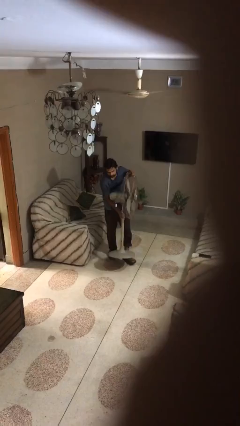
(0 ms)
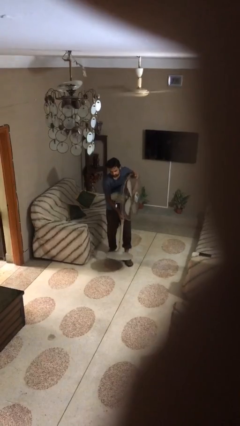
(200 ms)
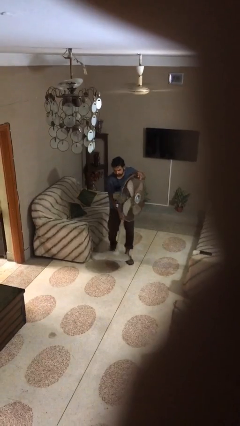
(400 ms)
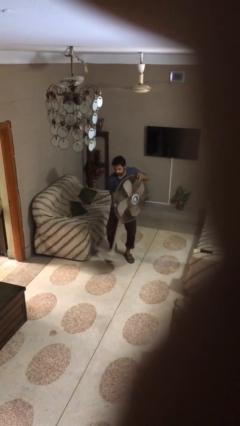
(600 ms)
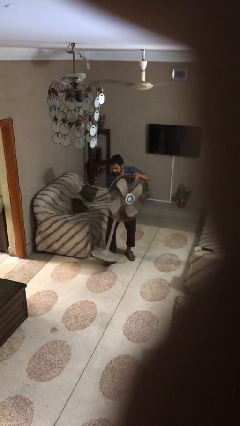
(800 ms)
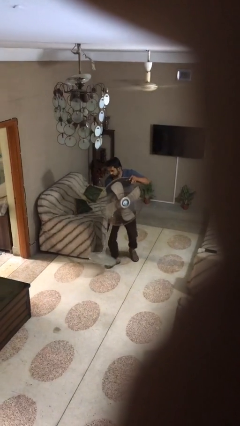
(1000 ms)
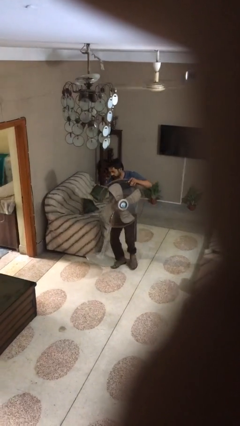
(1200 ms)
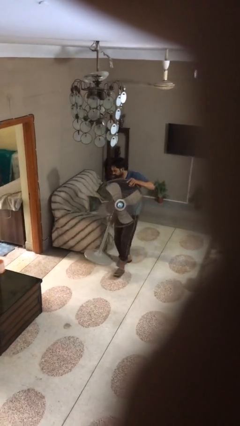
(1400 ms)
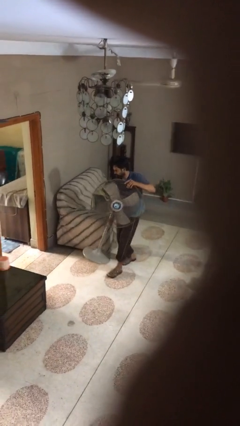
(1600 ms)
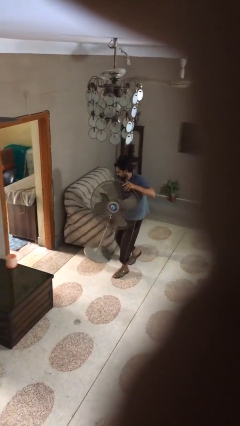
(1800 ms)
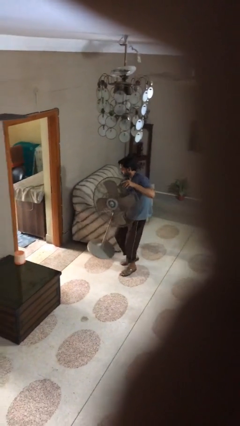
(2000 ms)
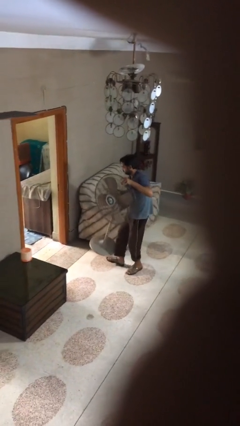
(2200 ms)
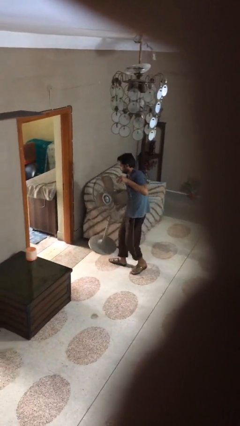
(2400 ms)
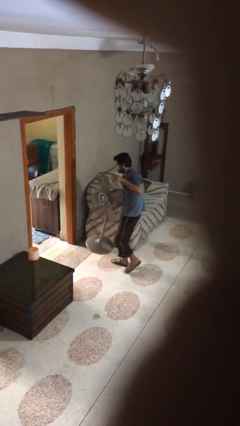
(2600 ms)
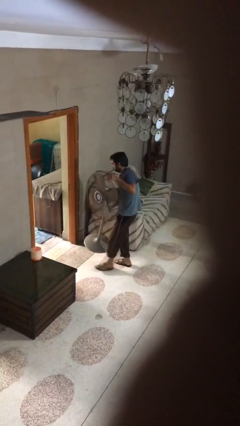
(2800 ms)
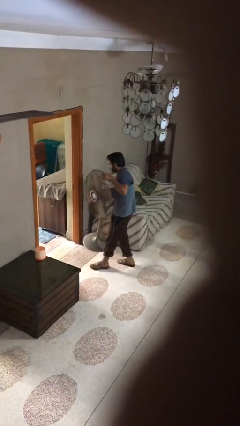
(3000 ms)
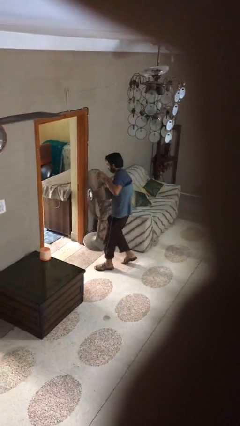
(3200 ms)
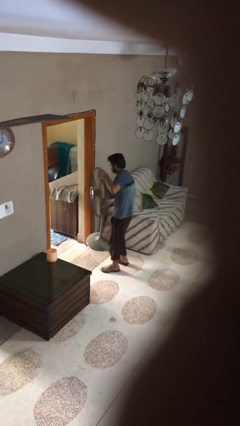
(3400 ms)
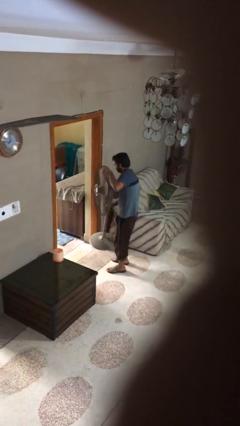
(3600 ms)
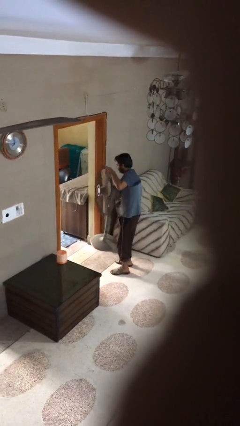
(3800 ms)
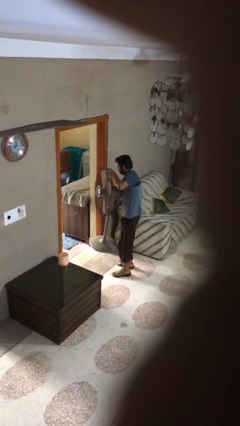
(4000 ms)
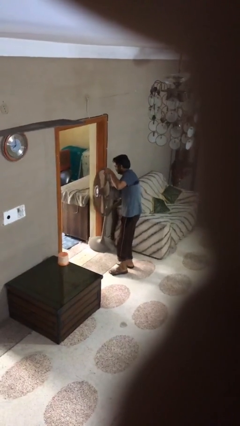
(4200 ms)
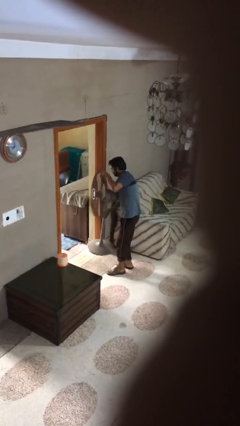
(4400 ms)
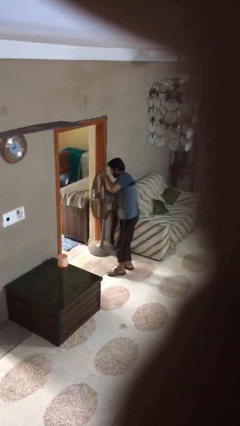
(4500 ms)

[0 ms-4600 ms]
person carries heavy object

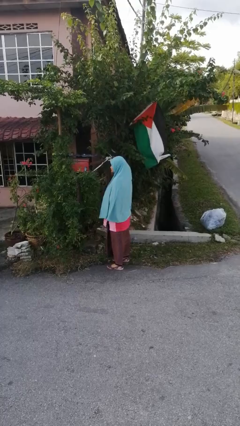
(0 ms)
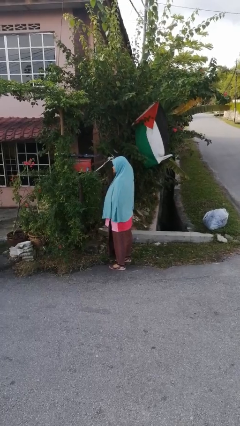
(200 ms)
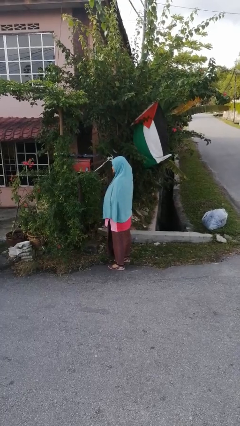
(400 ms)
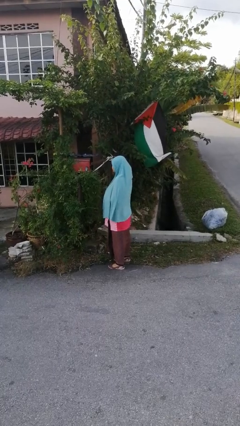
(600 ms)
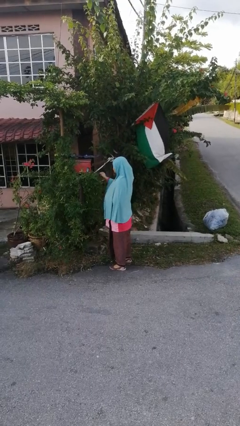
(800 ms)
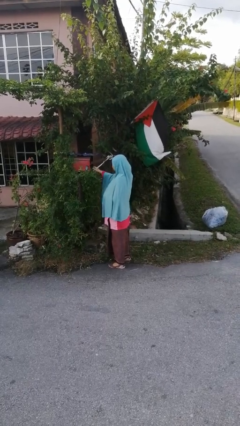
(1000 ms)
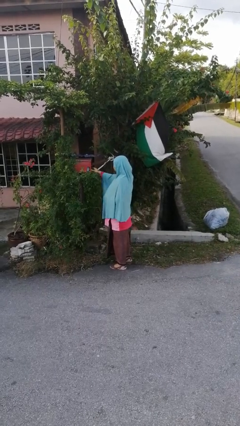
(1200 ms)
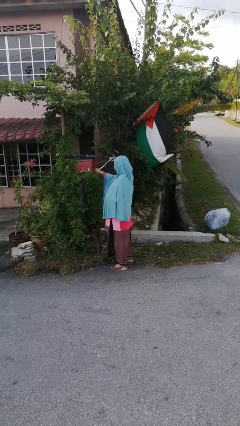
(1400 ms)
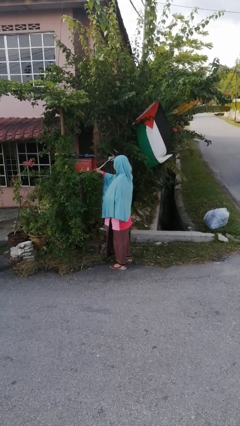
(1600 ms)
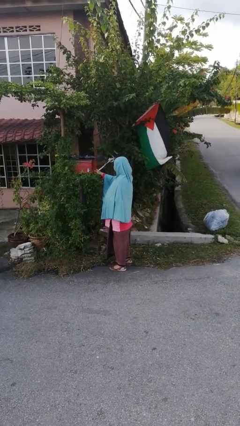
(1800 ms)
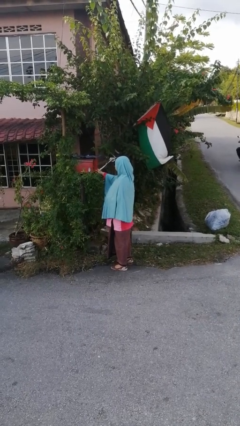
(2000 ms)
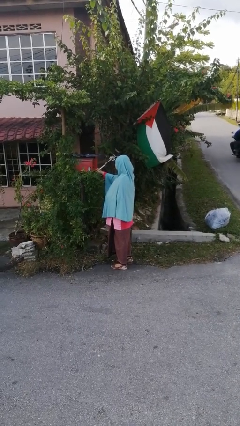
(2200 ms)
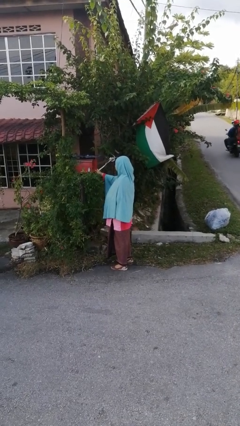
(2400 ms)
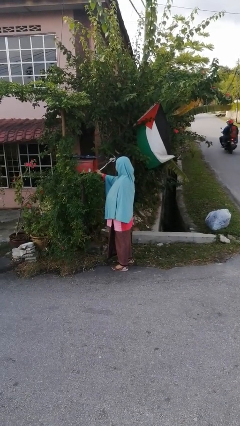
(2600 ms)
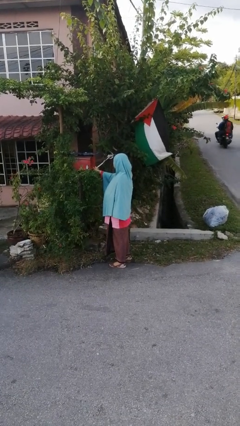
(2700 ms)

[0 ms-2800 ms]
person opens mailbox

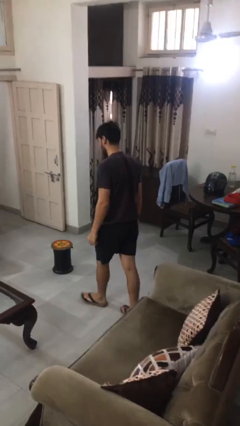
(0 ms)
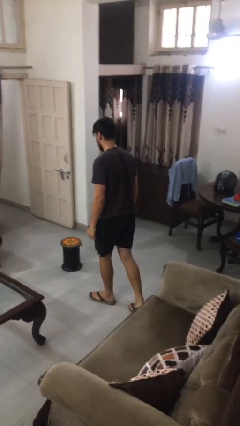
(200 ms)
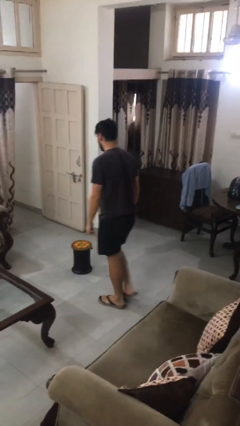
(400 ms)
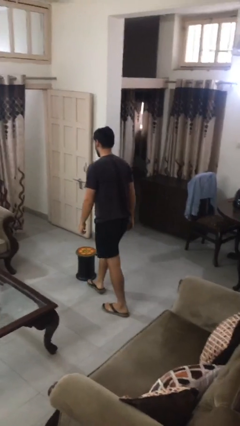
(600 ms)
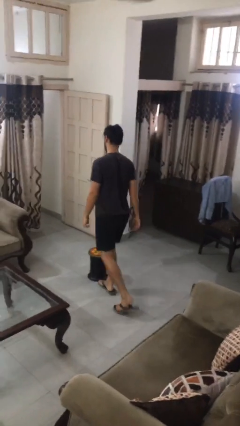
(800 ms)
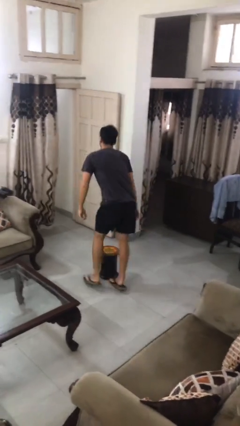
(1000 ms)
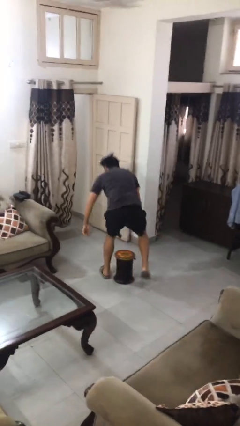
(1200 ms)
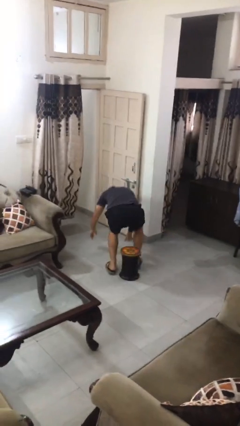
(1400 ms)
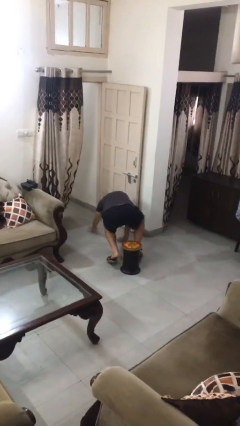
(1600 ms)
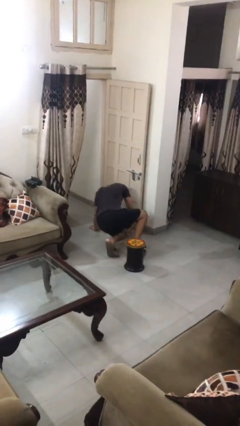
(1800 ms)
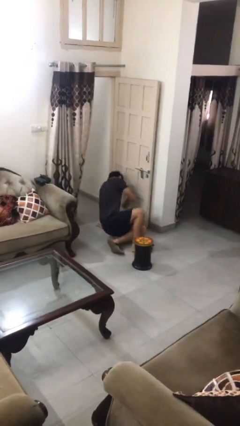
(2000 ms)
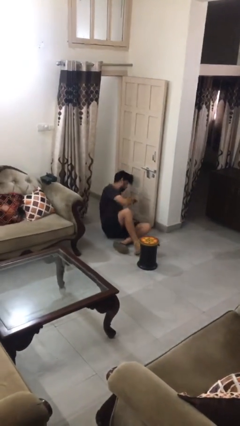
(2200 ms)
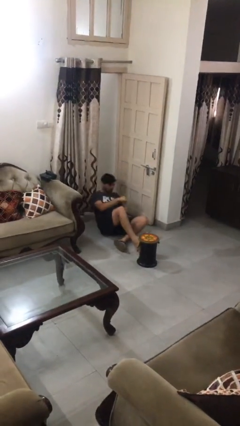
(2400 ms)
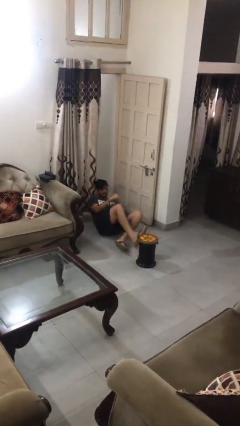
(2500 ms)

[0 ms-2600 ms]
person trips on object on floor

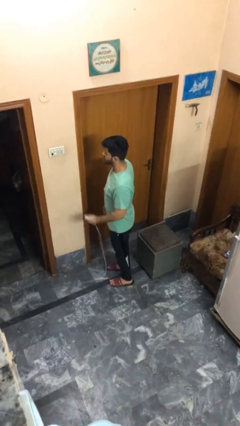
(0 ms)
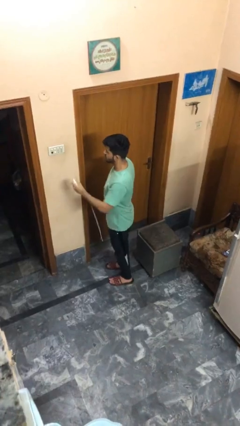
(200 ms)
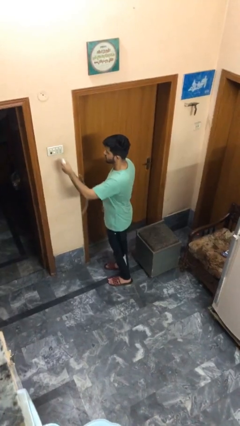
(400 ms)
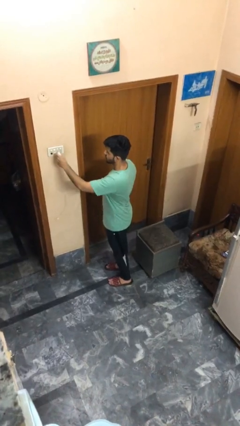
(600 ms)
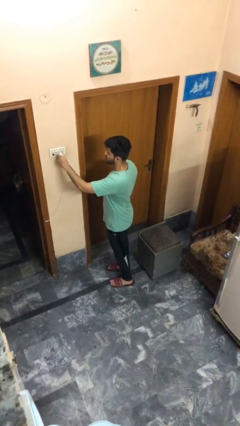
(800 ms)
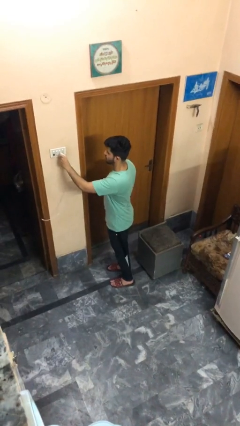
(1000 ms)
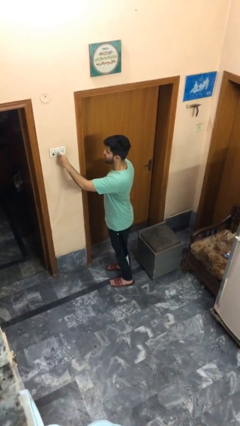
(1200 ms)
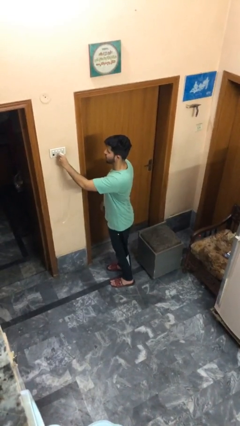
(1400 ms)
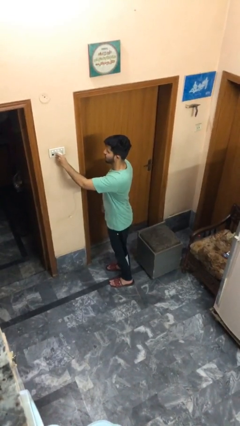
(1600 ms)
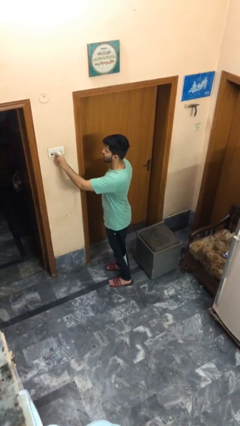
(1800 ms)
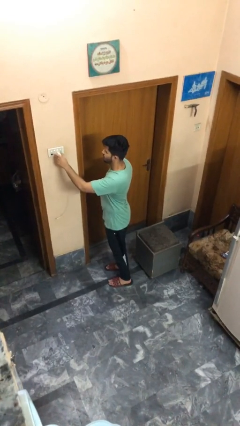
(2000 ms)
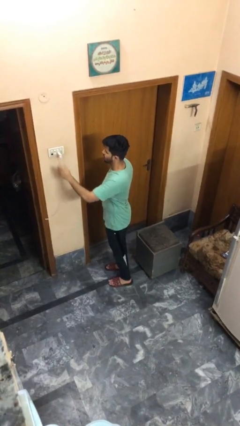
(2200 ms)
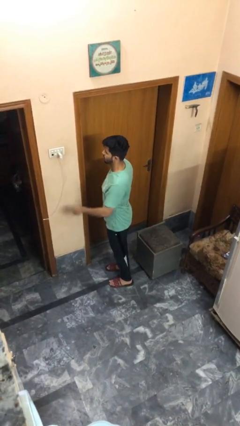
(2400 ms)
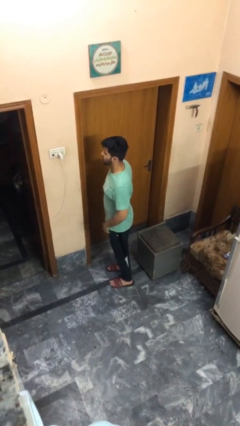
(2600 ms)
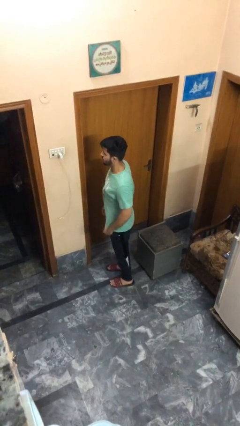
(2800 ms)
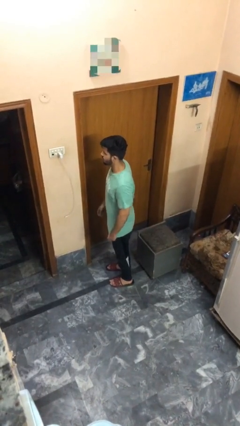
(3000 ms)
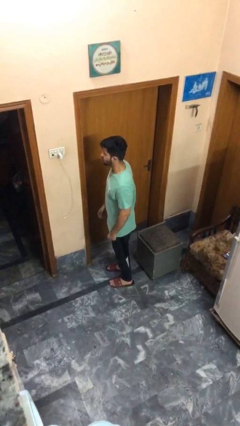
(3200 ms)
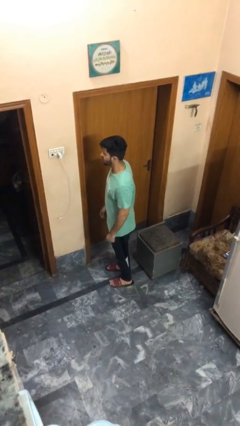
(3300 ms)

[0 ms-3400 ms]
person plugs into electrical socket

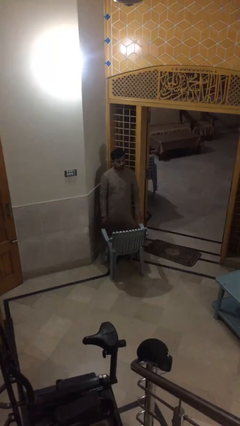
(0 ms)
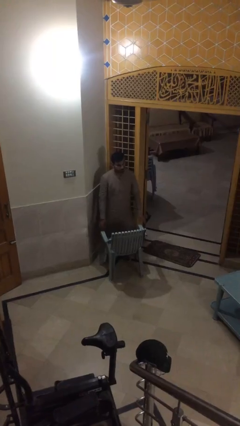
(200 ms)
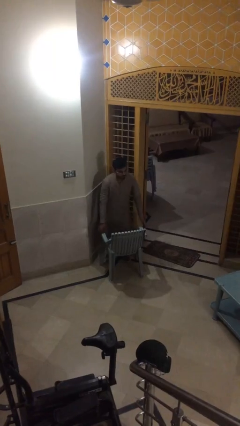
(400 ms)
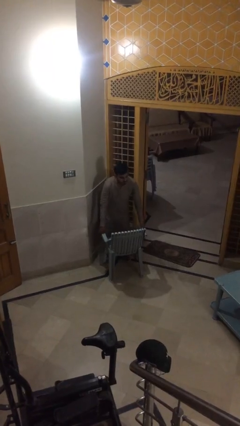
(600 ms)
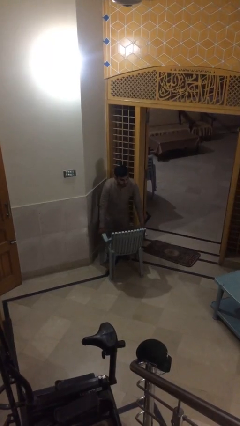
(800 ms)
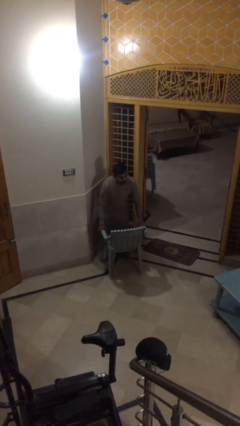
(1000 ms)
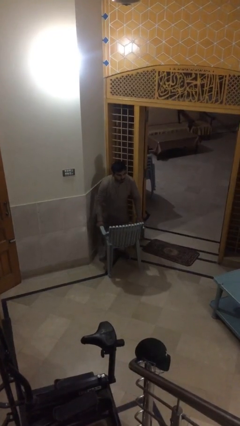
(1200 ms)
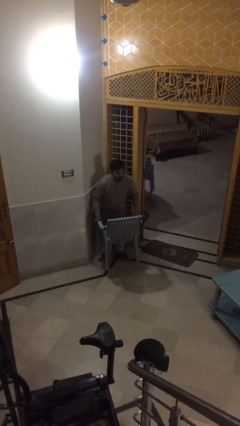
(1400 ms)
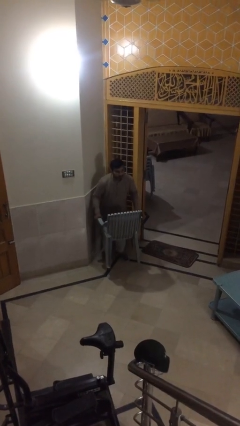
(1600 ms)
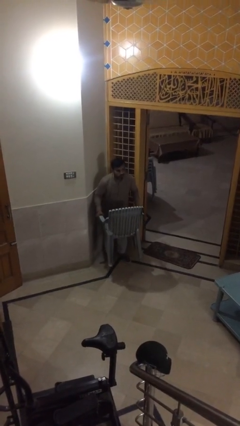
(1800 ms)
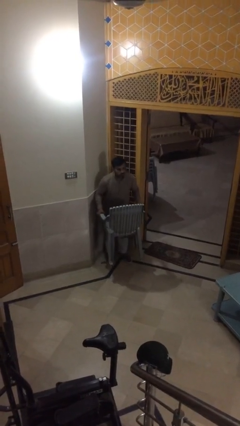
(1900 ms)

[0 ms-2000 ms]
person picks up object from floor

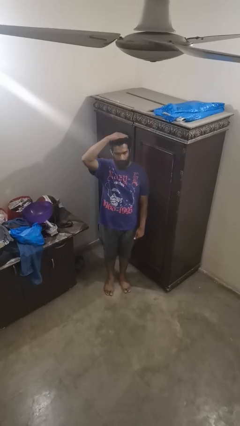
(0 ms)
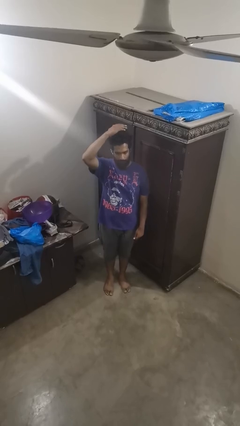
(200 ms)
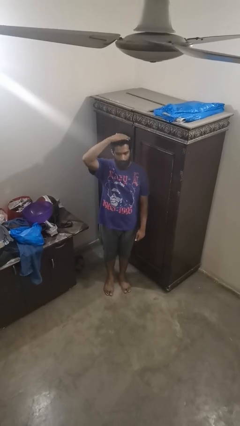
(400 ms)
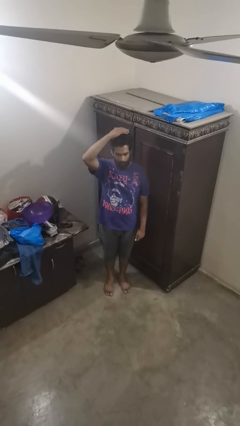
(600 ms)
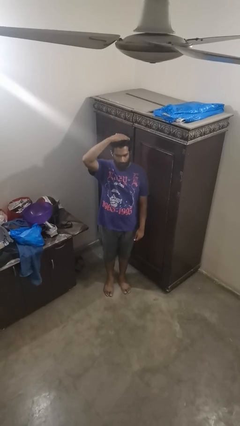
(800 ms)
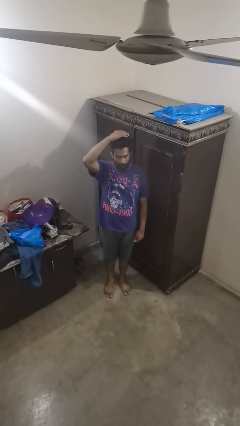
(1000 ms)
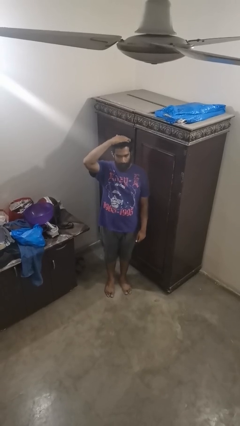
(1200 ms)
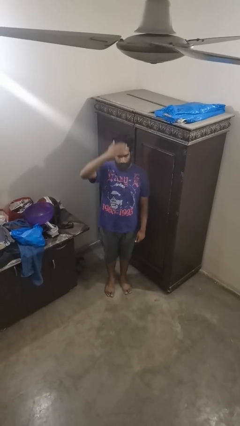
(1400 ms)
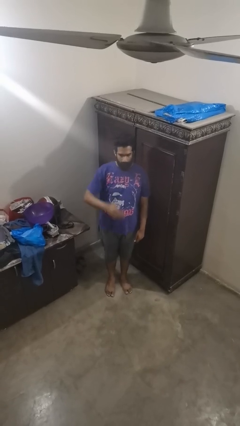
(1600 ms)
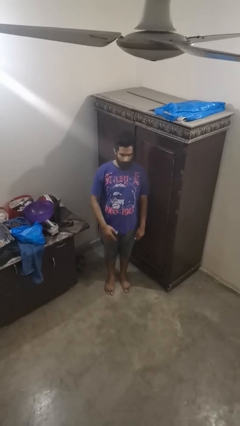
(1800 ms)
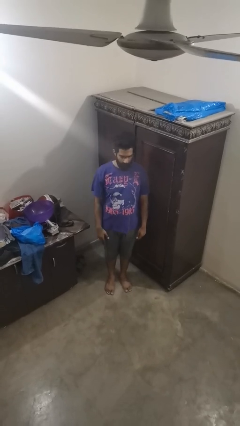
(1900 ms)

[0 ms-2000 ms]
person pats head

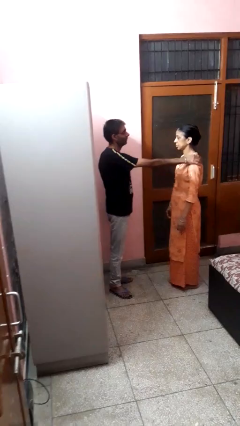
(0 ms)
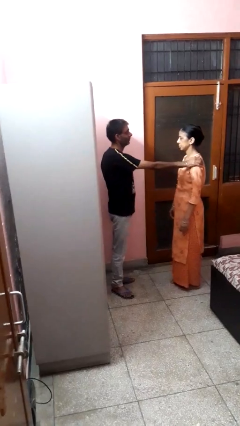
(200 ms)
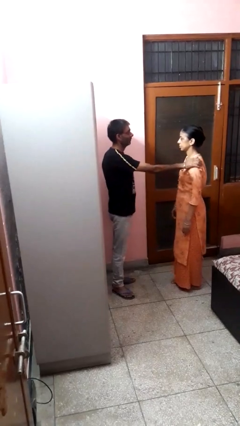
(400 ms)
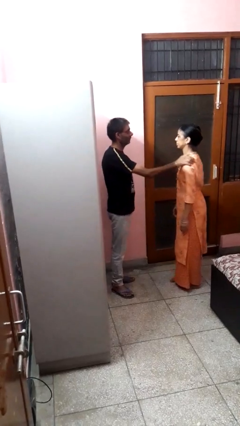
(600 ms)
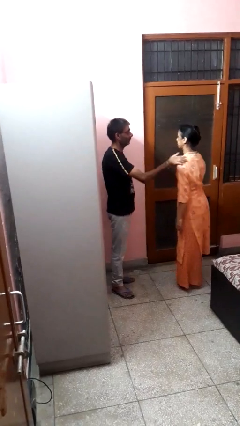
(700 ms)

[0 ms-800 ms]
person grabs person by shoulder
